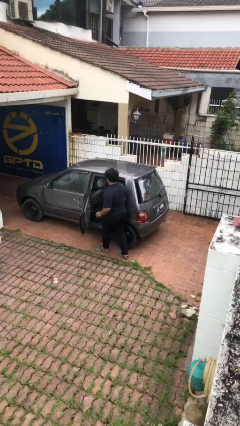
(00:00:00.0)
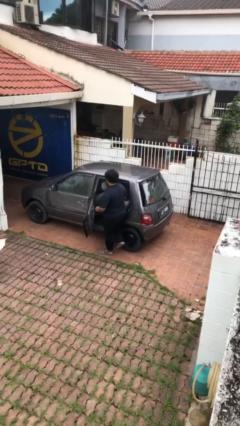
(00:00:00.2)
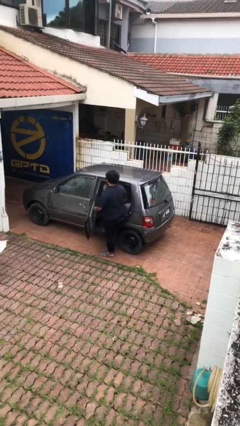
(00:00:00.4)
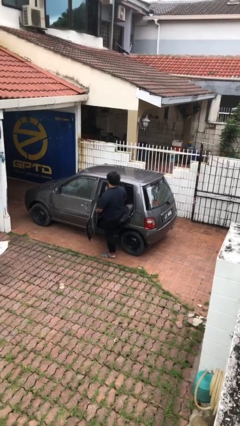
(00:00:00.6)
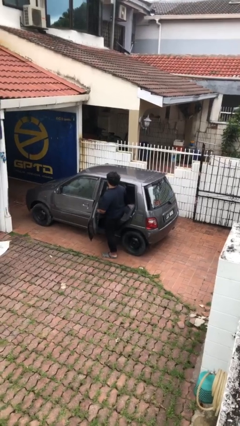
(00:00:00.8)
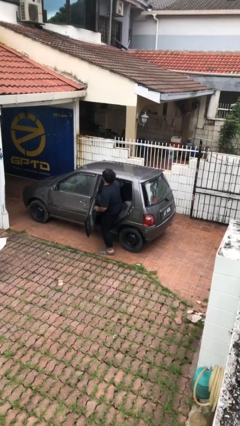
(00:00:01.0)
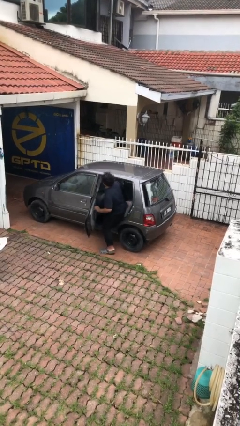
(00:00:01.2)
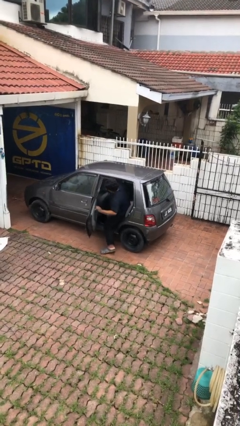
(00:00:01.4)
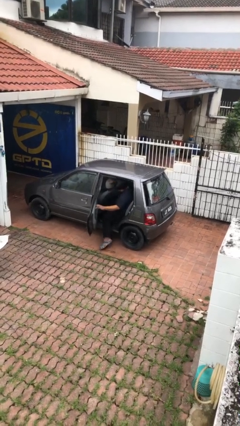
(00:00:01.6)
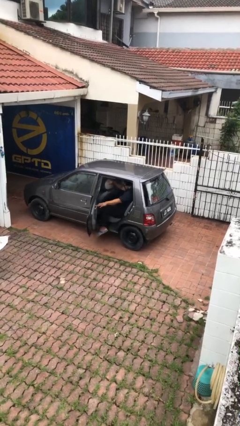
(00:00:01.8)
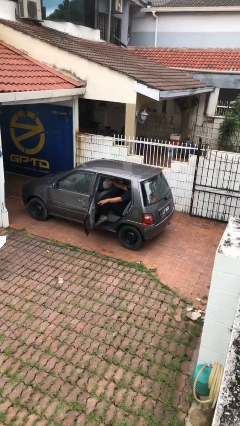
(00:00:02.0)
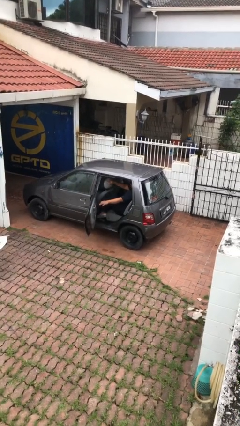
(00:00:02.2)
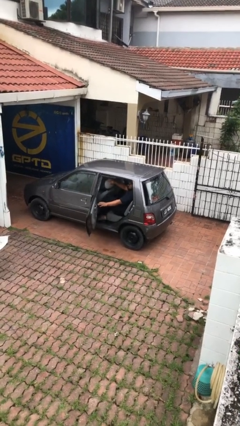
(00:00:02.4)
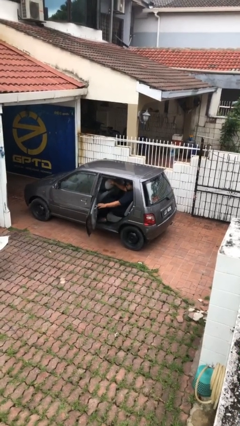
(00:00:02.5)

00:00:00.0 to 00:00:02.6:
person enters car

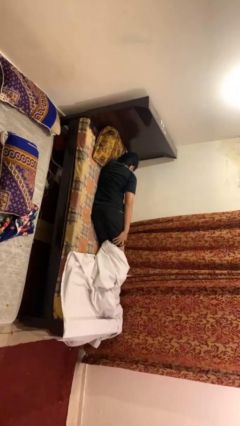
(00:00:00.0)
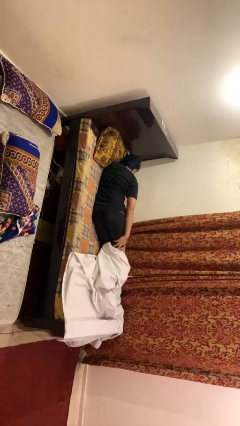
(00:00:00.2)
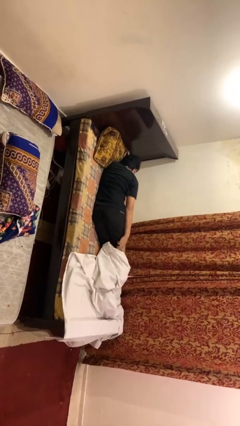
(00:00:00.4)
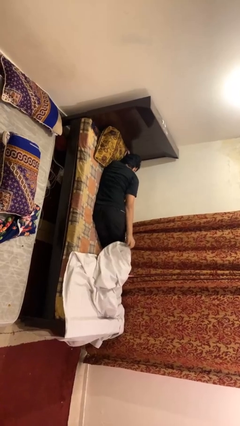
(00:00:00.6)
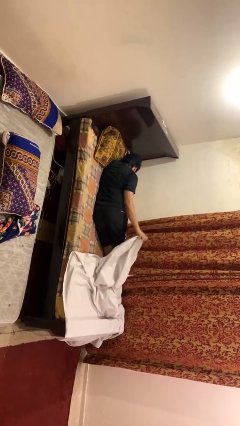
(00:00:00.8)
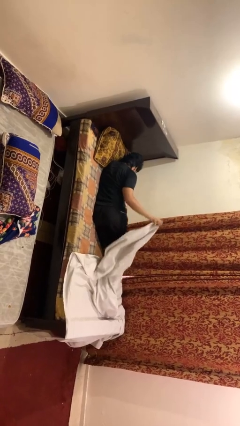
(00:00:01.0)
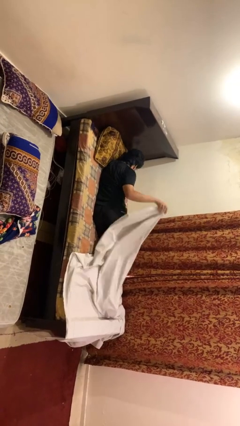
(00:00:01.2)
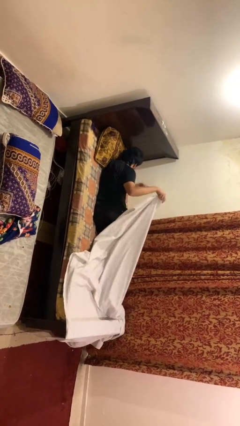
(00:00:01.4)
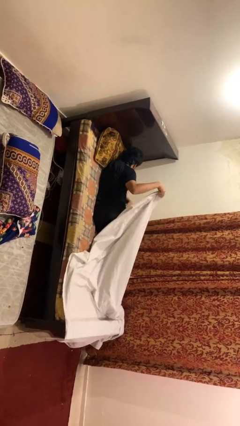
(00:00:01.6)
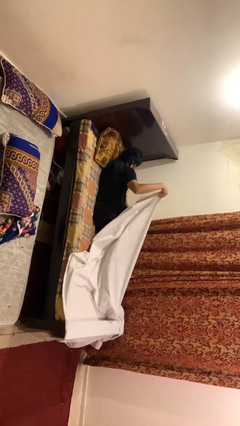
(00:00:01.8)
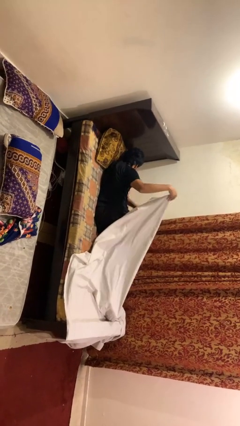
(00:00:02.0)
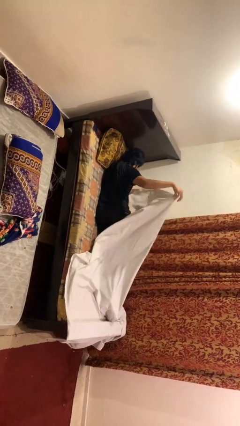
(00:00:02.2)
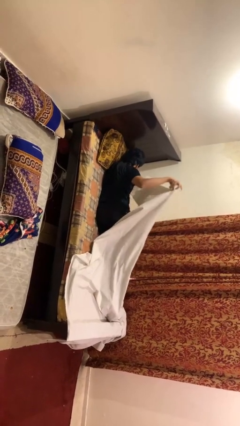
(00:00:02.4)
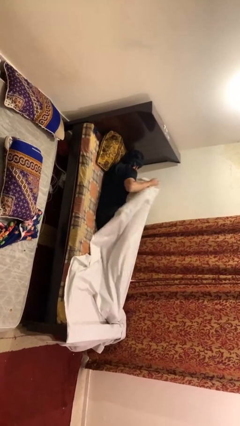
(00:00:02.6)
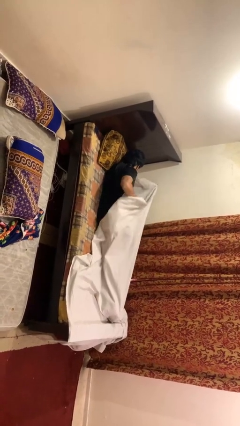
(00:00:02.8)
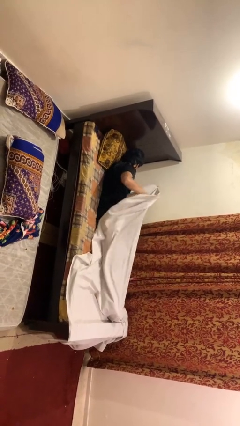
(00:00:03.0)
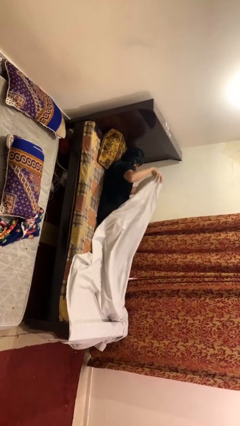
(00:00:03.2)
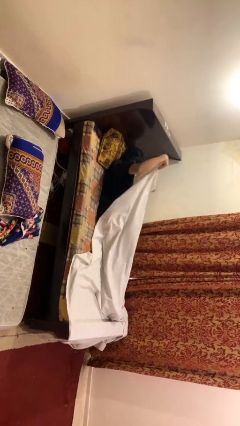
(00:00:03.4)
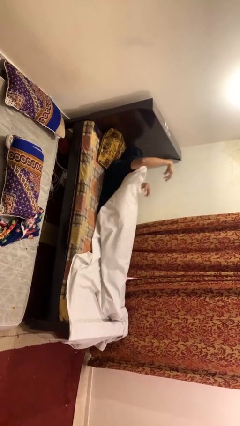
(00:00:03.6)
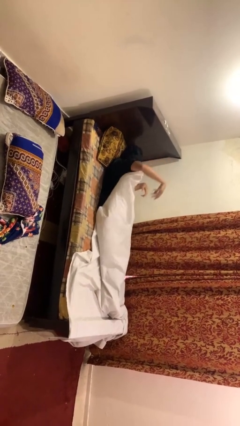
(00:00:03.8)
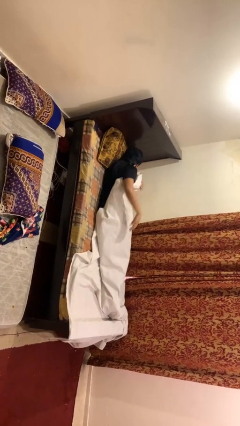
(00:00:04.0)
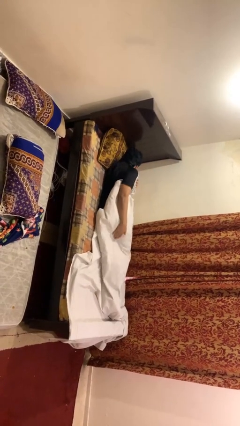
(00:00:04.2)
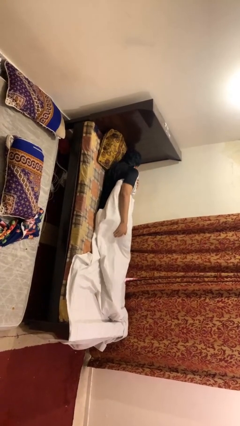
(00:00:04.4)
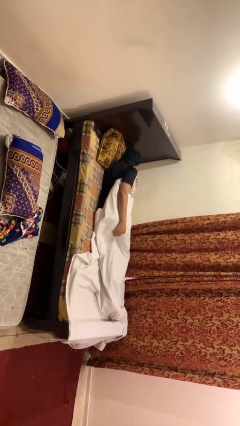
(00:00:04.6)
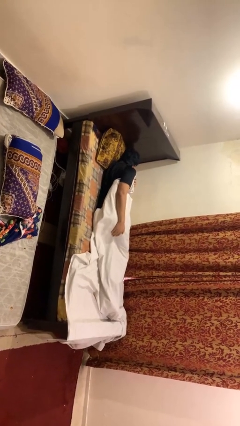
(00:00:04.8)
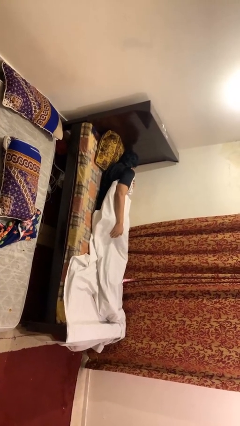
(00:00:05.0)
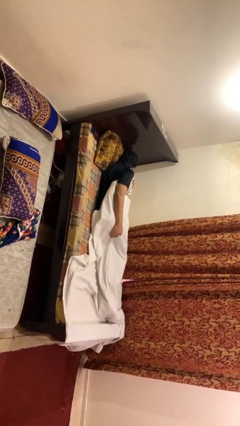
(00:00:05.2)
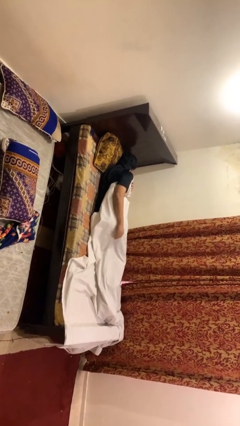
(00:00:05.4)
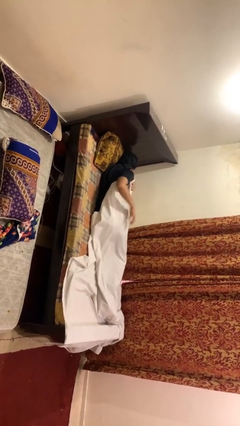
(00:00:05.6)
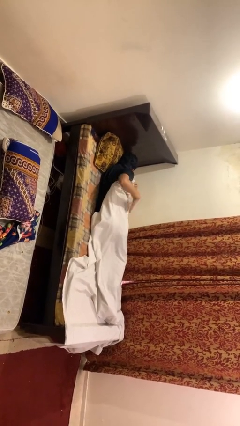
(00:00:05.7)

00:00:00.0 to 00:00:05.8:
person covers with bedsheets

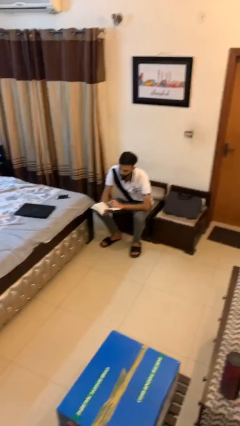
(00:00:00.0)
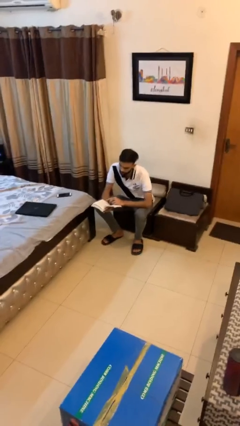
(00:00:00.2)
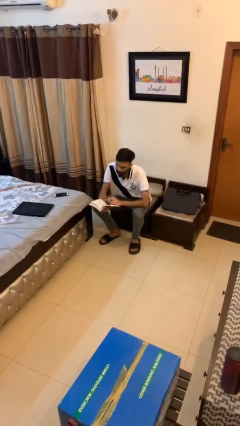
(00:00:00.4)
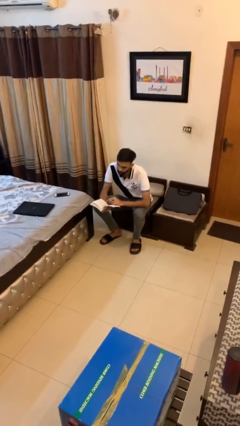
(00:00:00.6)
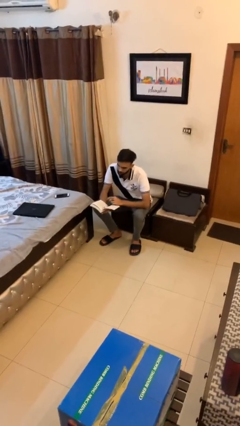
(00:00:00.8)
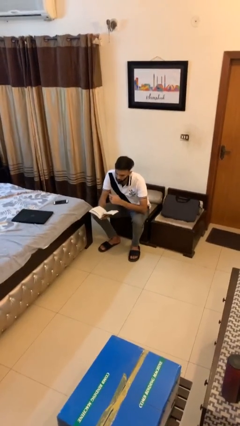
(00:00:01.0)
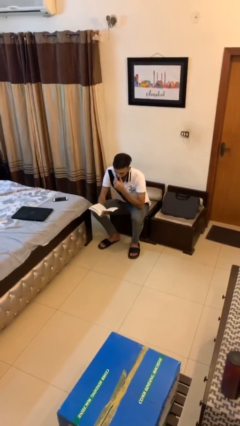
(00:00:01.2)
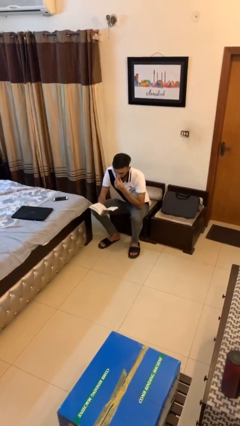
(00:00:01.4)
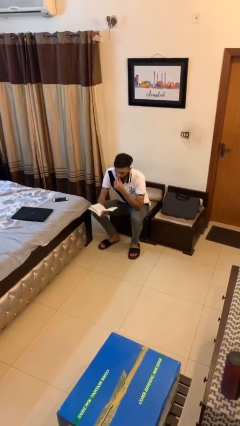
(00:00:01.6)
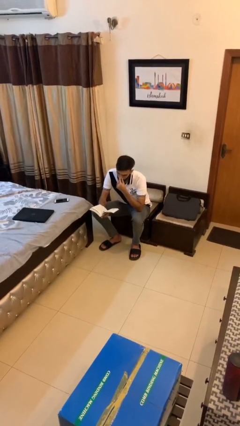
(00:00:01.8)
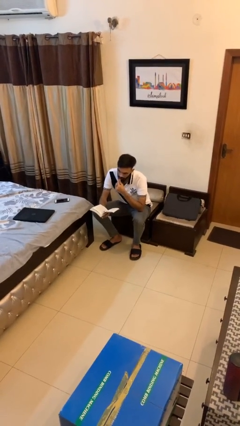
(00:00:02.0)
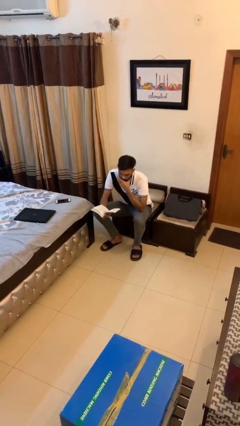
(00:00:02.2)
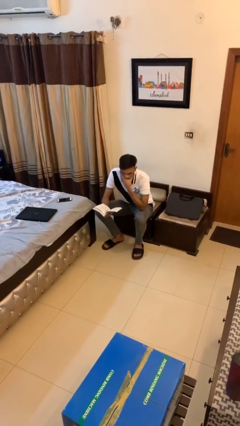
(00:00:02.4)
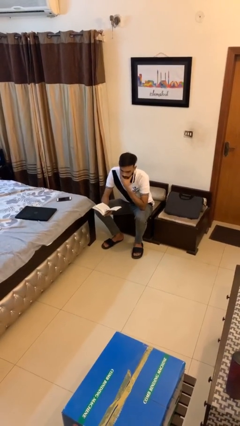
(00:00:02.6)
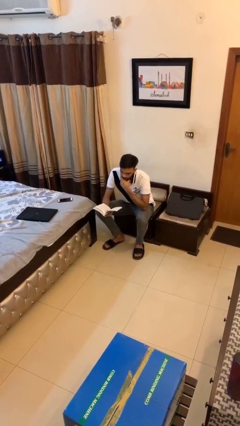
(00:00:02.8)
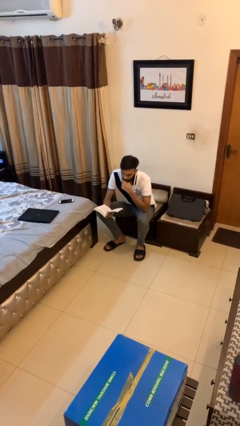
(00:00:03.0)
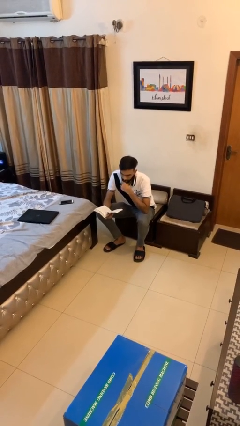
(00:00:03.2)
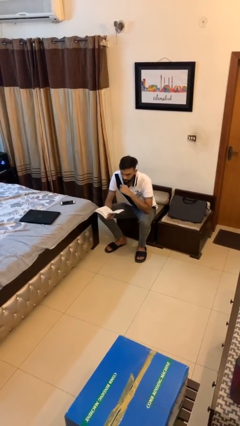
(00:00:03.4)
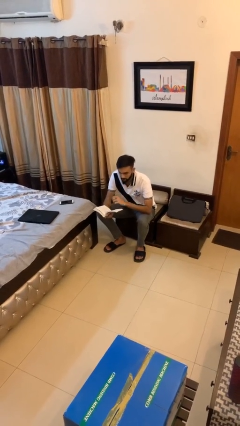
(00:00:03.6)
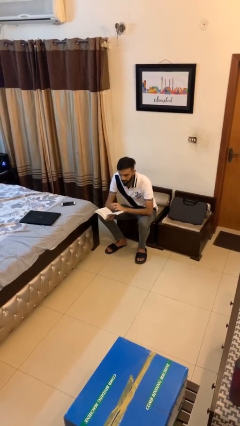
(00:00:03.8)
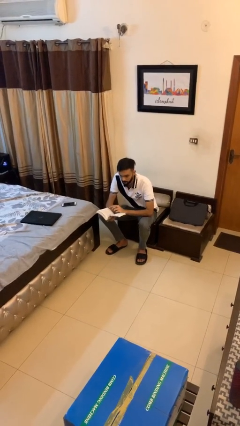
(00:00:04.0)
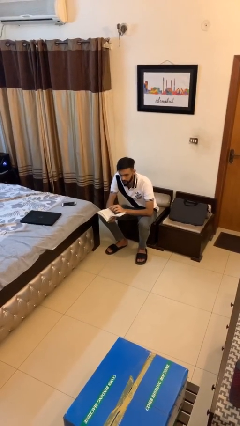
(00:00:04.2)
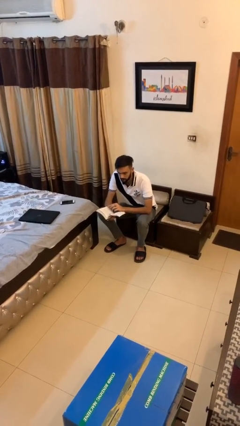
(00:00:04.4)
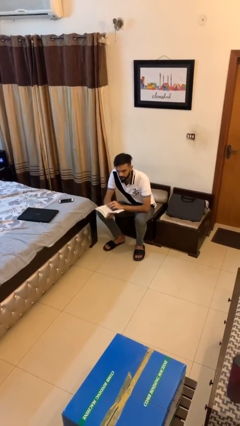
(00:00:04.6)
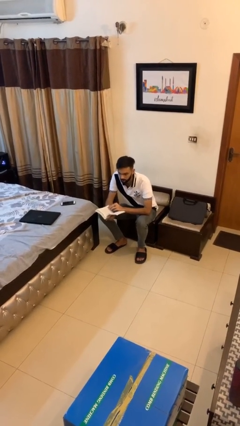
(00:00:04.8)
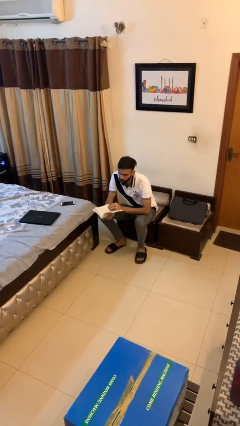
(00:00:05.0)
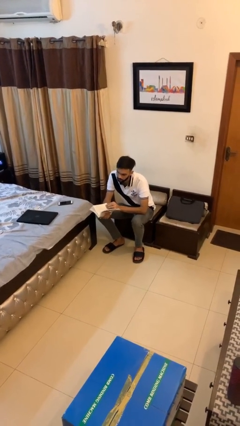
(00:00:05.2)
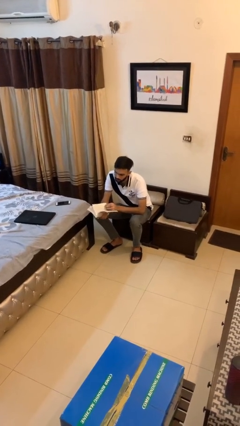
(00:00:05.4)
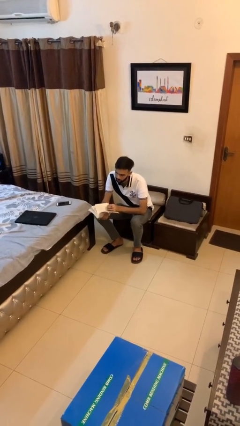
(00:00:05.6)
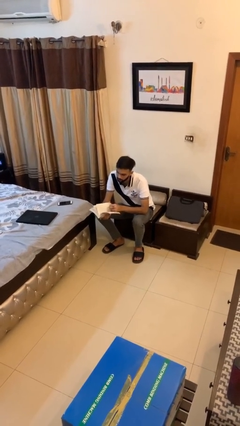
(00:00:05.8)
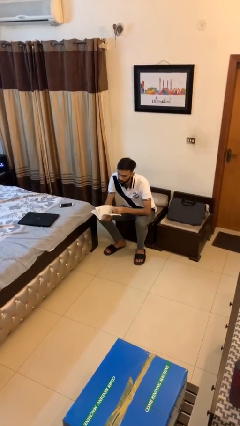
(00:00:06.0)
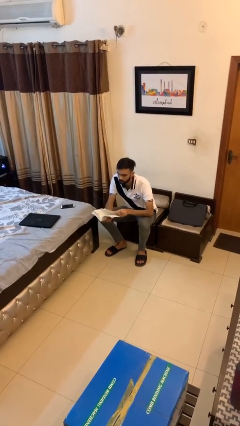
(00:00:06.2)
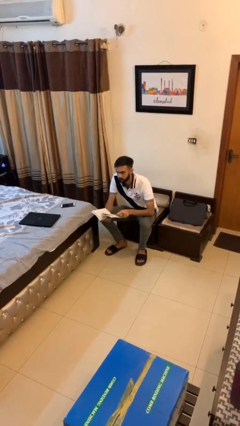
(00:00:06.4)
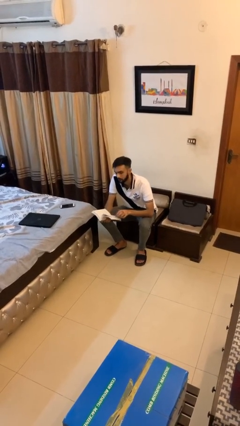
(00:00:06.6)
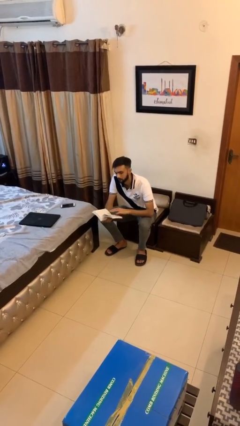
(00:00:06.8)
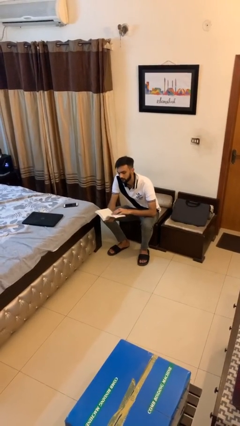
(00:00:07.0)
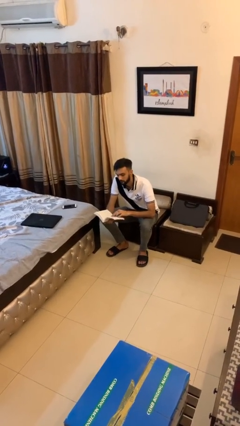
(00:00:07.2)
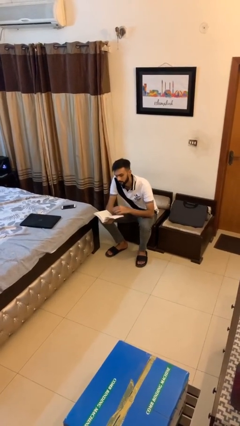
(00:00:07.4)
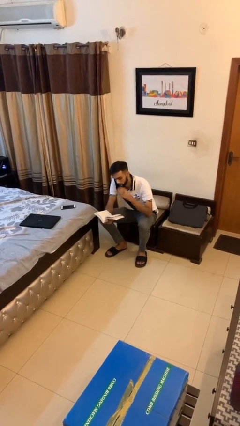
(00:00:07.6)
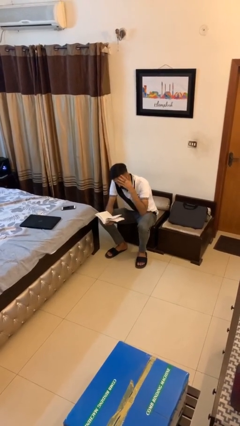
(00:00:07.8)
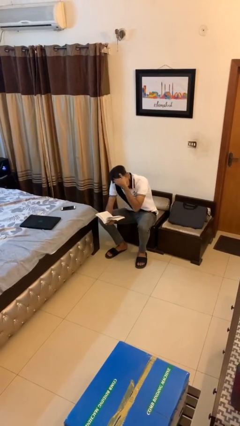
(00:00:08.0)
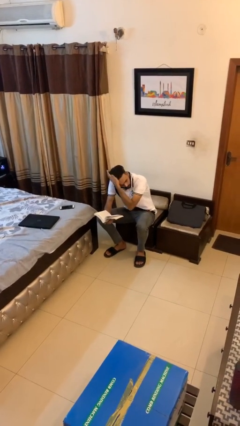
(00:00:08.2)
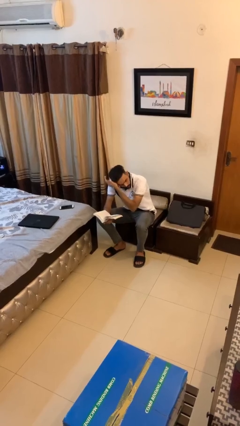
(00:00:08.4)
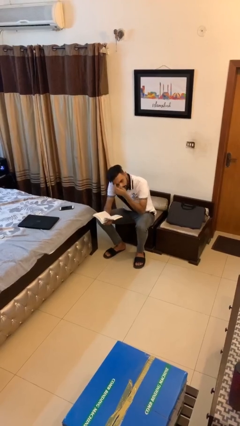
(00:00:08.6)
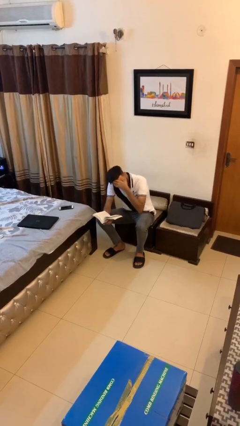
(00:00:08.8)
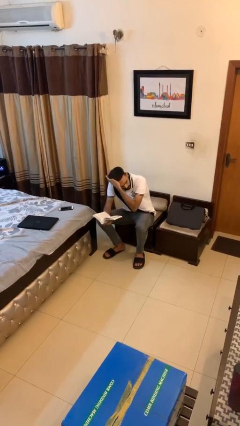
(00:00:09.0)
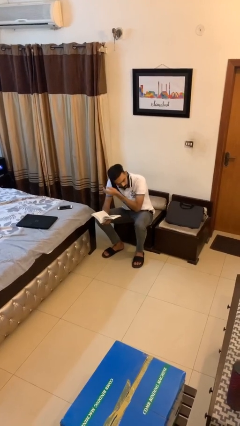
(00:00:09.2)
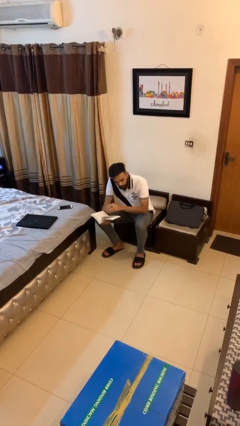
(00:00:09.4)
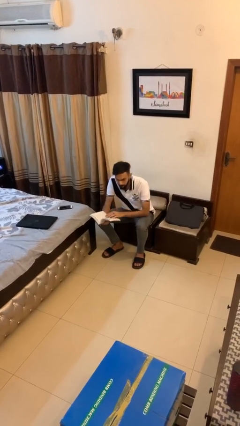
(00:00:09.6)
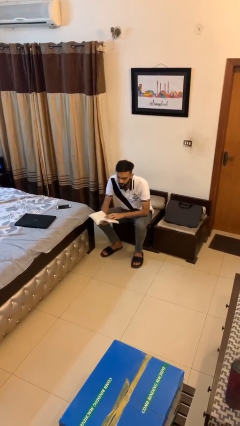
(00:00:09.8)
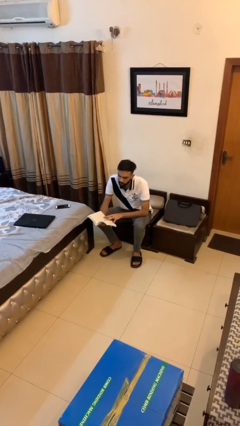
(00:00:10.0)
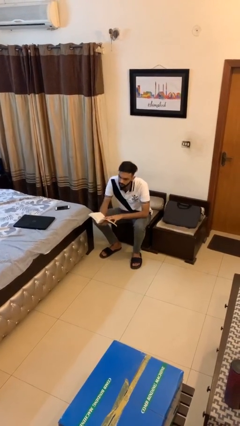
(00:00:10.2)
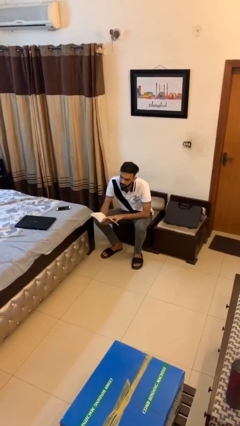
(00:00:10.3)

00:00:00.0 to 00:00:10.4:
person reads document
